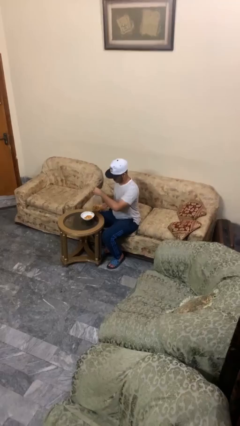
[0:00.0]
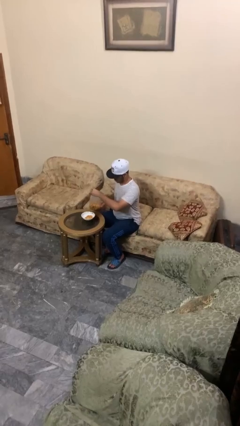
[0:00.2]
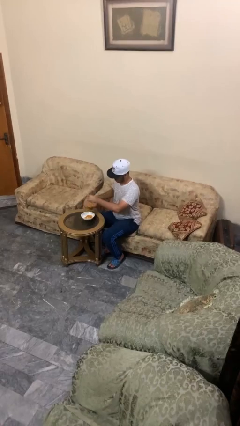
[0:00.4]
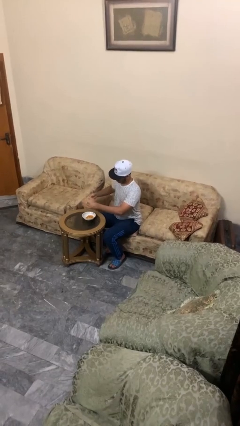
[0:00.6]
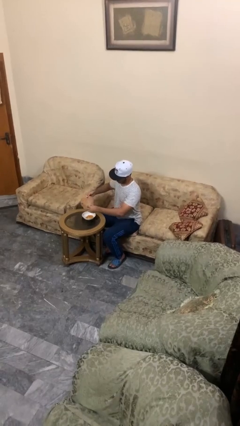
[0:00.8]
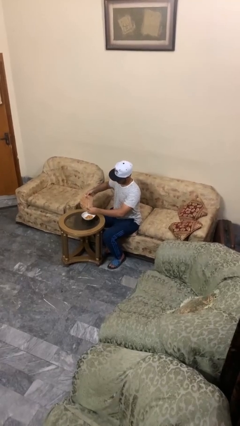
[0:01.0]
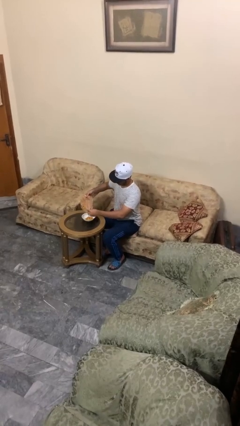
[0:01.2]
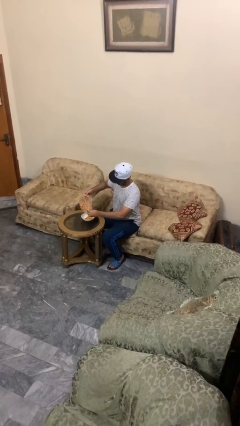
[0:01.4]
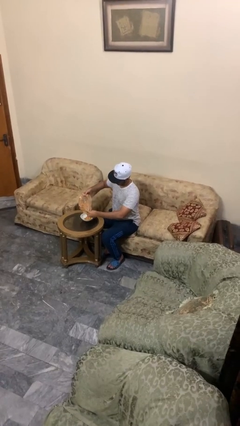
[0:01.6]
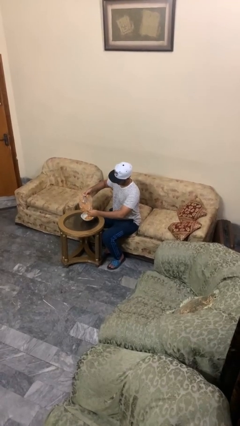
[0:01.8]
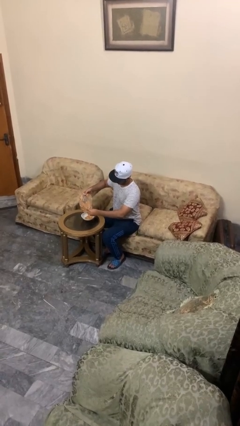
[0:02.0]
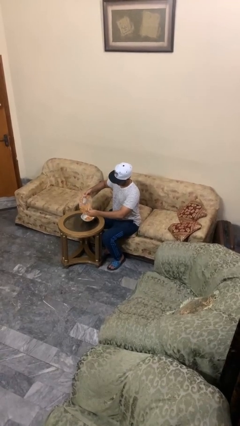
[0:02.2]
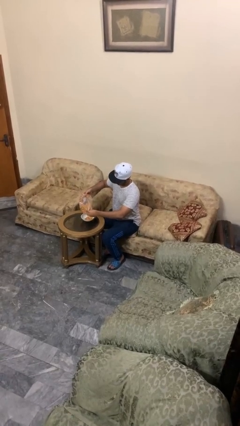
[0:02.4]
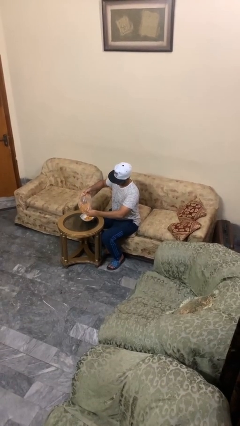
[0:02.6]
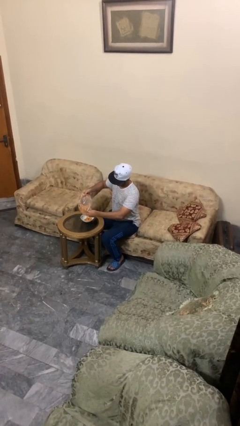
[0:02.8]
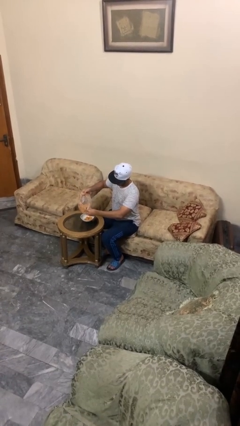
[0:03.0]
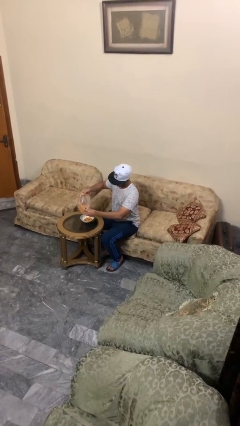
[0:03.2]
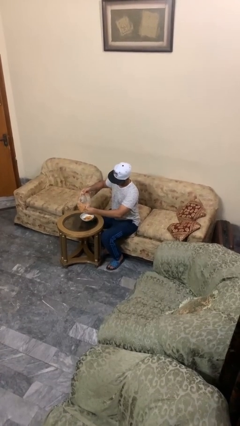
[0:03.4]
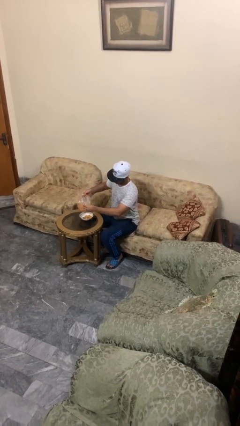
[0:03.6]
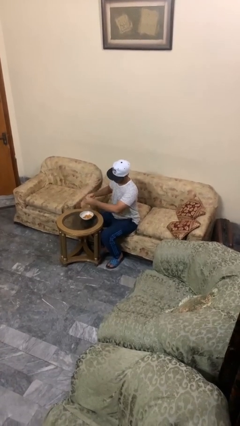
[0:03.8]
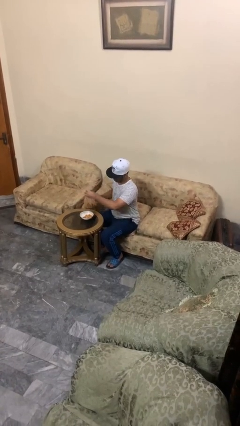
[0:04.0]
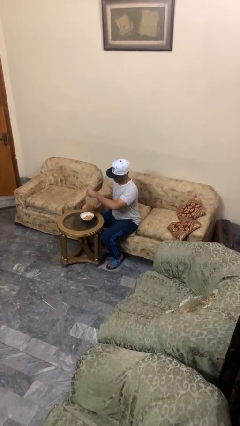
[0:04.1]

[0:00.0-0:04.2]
person pours into bowl

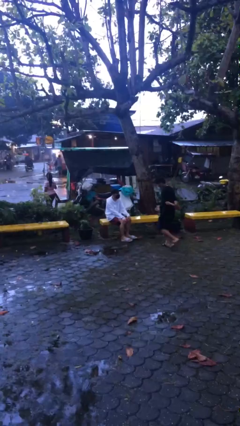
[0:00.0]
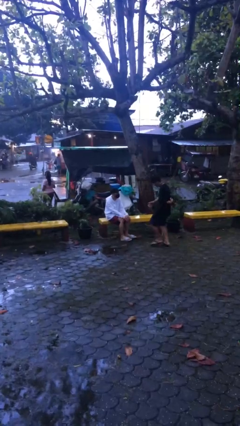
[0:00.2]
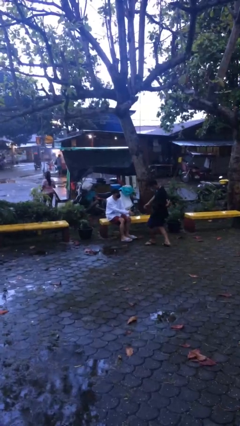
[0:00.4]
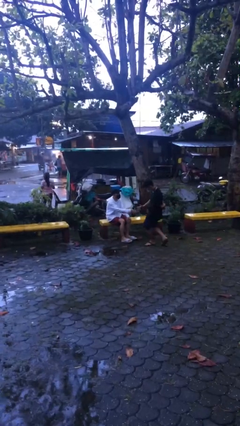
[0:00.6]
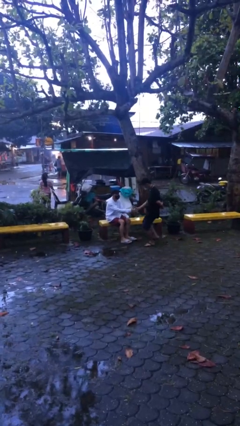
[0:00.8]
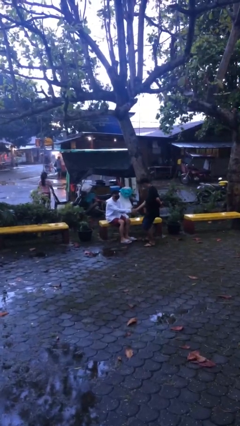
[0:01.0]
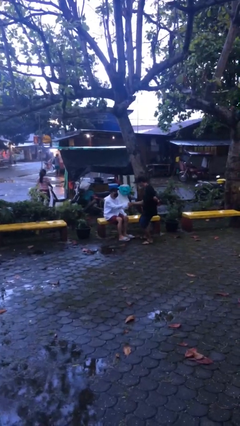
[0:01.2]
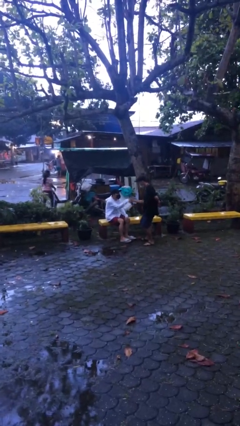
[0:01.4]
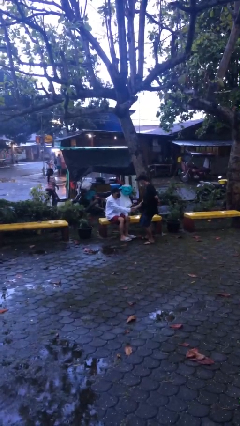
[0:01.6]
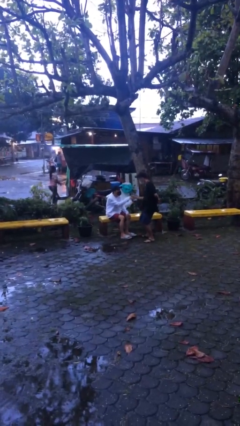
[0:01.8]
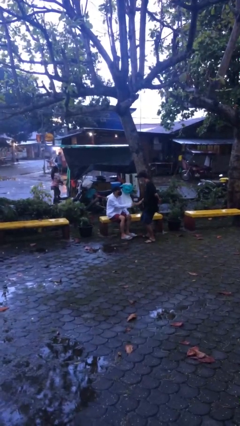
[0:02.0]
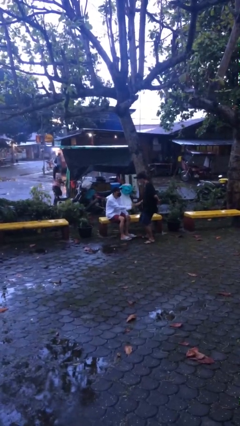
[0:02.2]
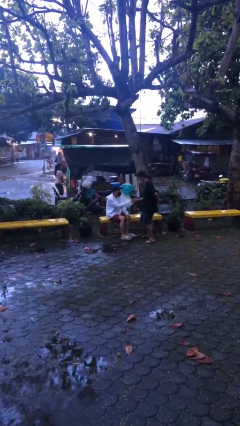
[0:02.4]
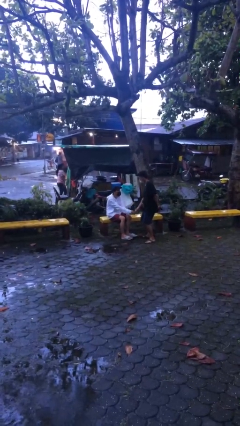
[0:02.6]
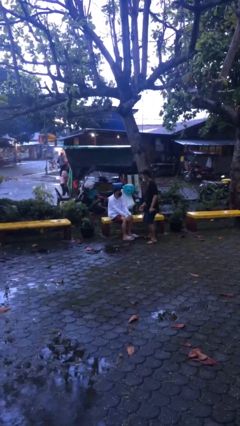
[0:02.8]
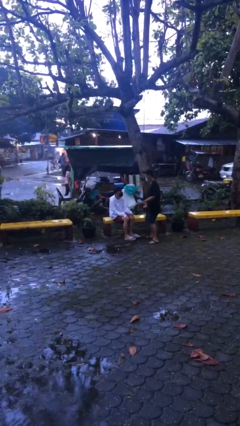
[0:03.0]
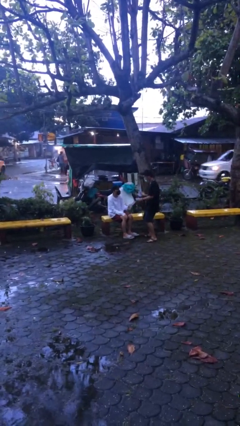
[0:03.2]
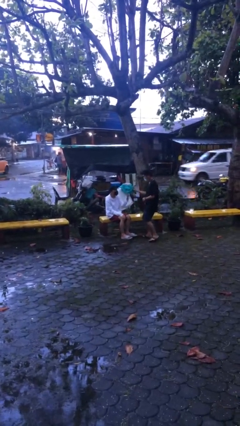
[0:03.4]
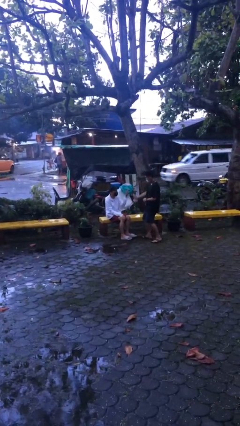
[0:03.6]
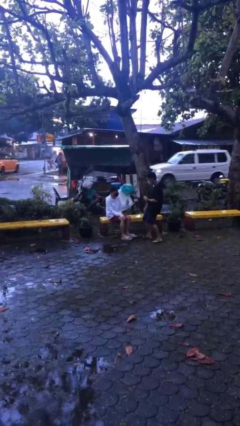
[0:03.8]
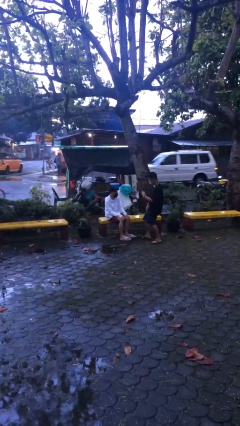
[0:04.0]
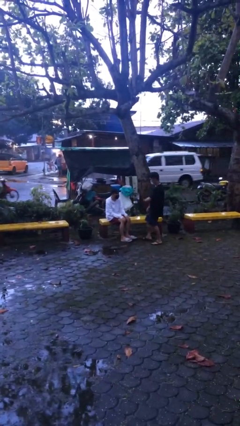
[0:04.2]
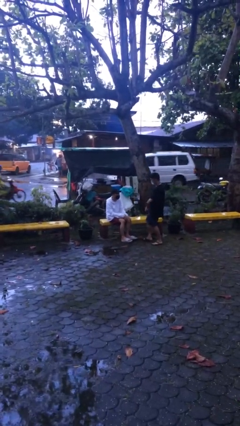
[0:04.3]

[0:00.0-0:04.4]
person shakes hand

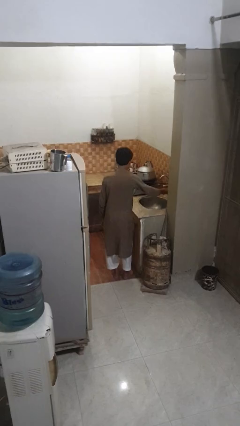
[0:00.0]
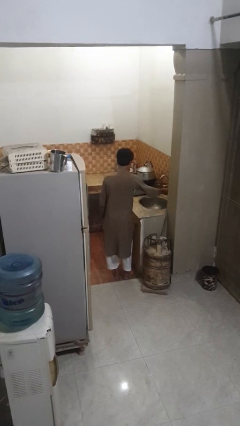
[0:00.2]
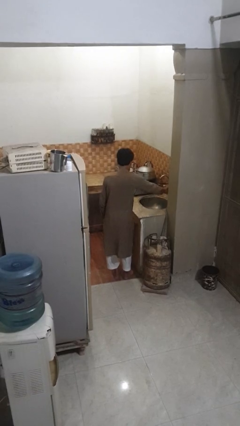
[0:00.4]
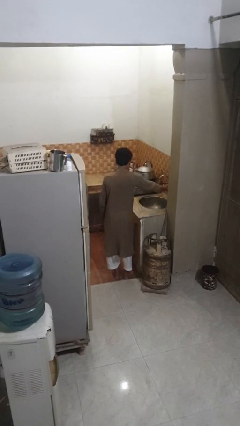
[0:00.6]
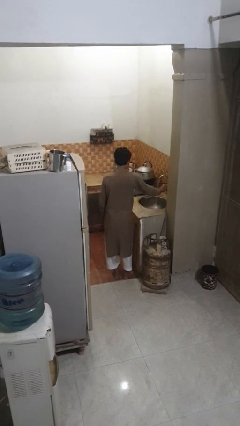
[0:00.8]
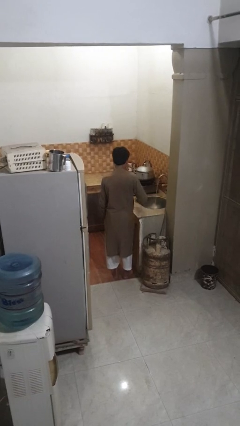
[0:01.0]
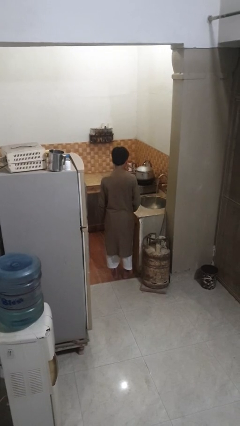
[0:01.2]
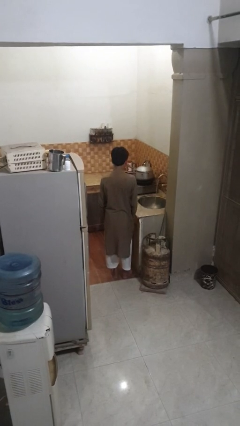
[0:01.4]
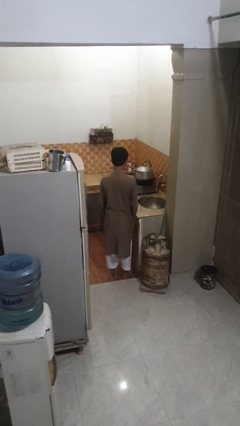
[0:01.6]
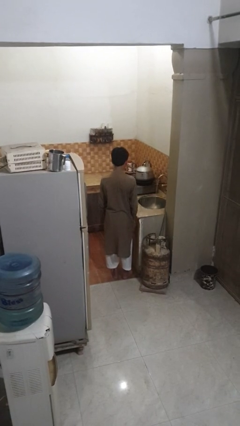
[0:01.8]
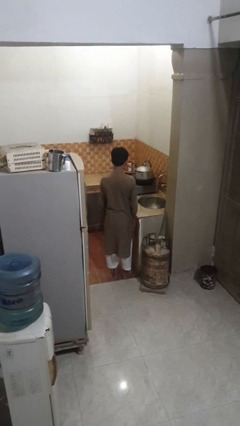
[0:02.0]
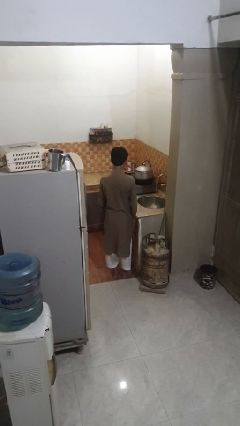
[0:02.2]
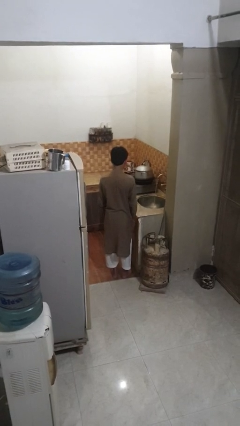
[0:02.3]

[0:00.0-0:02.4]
person turns on faucet

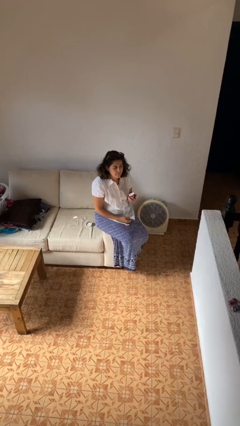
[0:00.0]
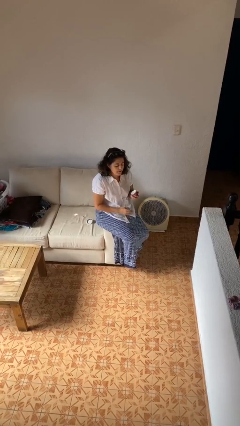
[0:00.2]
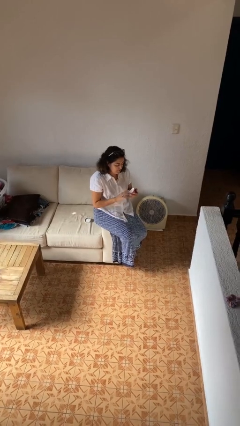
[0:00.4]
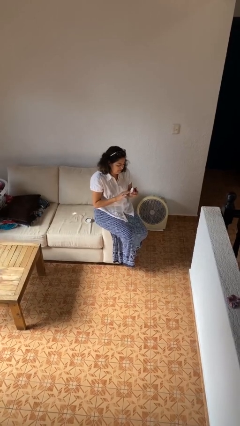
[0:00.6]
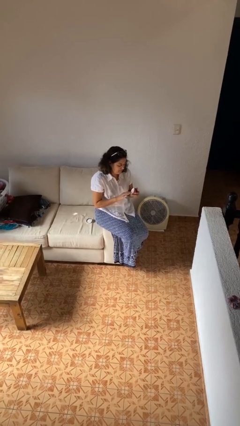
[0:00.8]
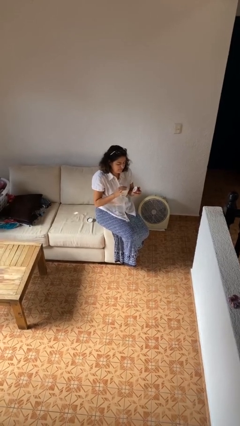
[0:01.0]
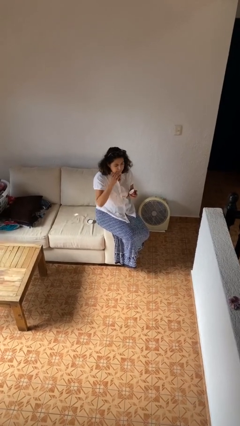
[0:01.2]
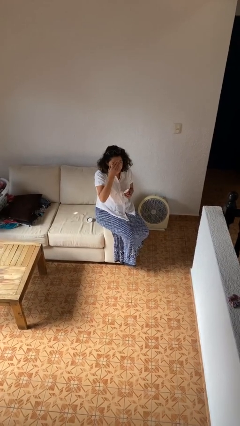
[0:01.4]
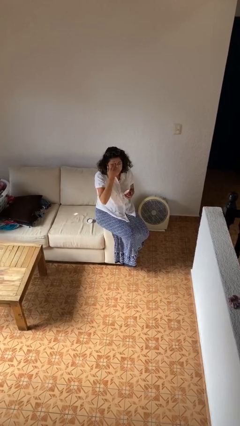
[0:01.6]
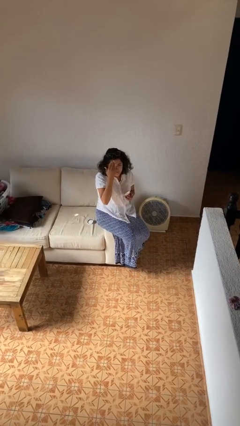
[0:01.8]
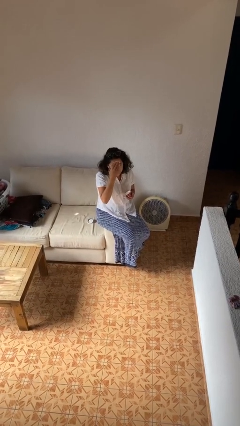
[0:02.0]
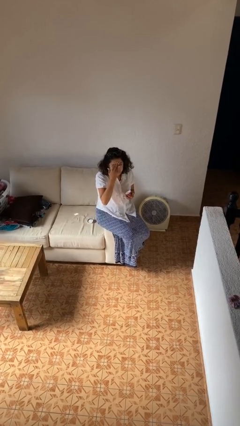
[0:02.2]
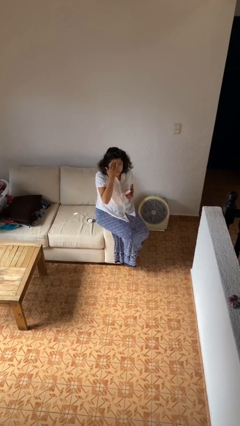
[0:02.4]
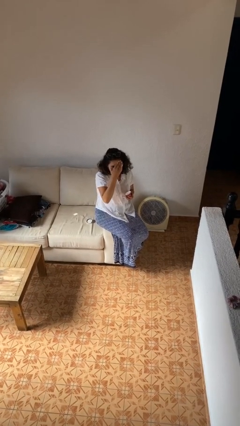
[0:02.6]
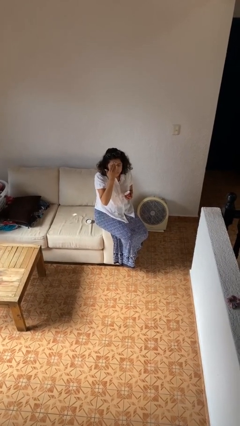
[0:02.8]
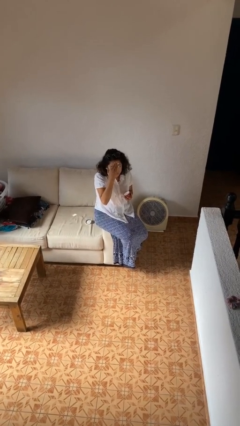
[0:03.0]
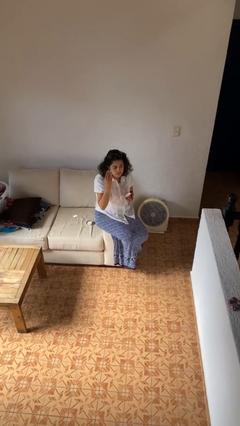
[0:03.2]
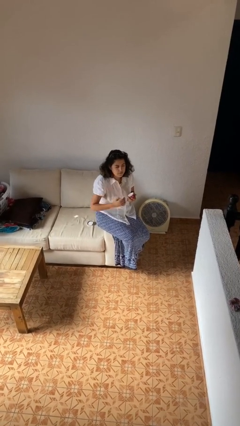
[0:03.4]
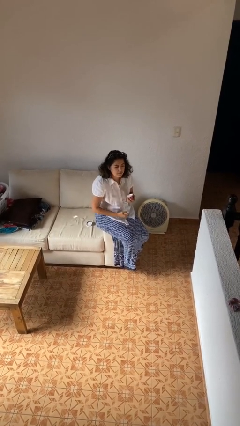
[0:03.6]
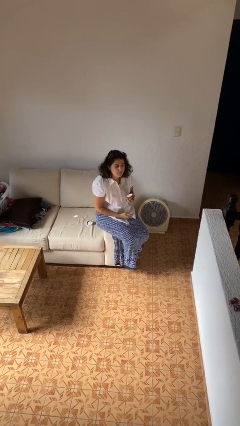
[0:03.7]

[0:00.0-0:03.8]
person applies facial moisturizer

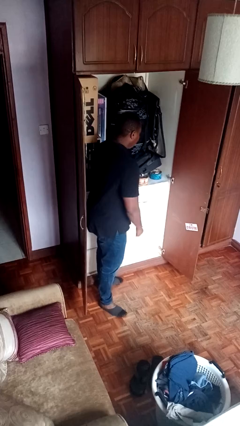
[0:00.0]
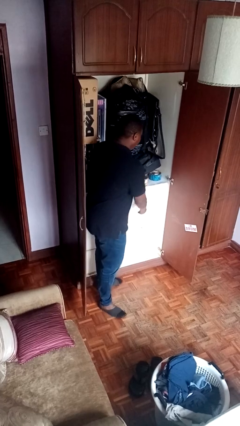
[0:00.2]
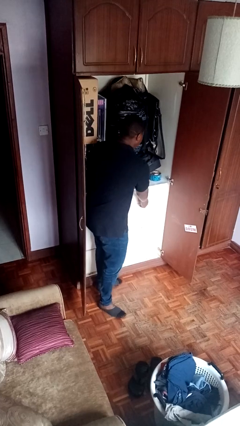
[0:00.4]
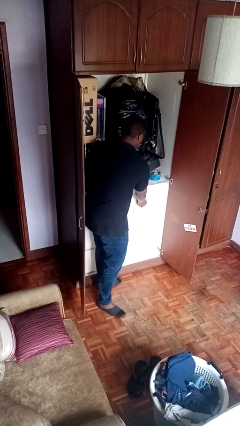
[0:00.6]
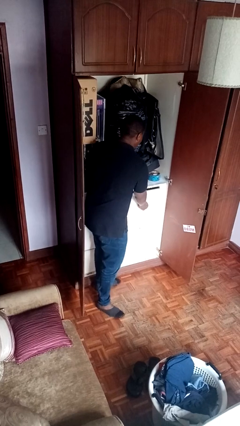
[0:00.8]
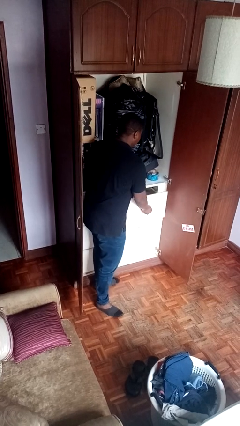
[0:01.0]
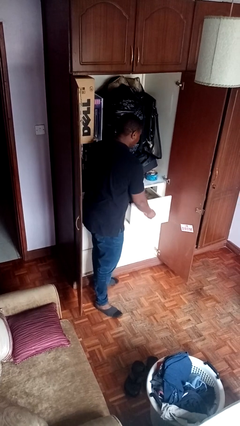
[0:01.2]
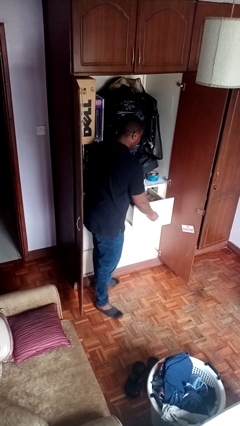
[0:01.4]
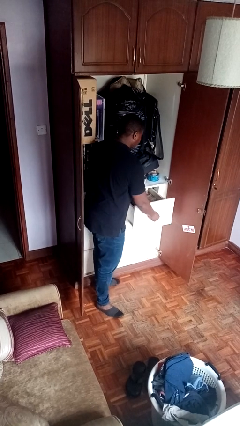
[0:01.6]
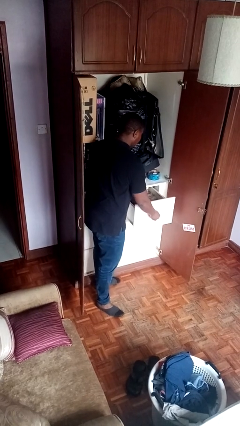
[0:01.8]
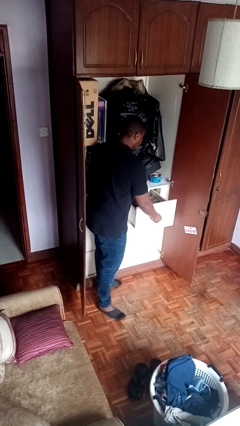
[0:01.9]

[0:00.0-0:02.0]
person opens dresser drawer

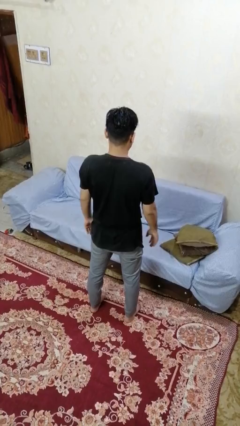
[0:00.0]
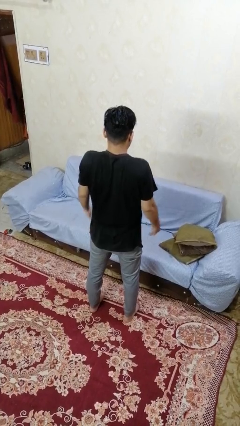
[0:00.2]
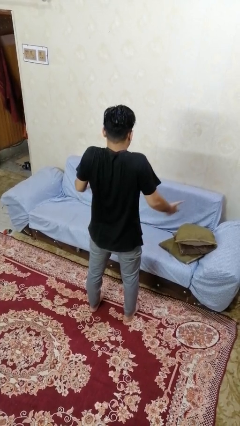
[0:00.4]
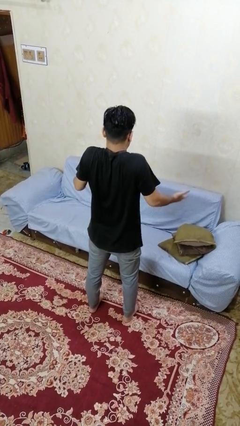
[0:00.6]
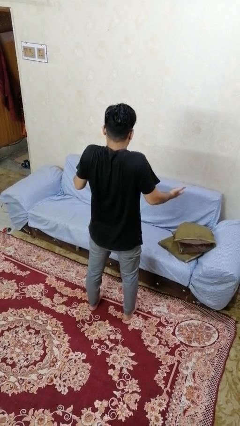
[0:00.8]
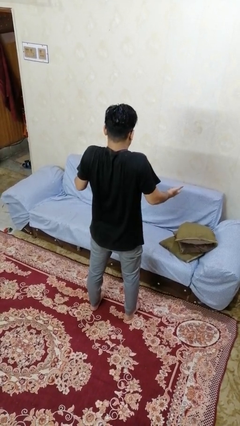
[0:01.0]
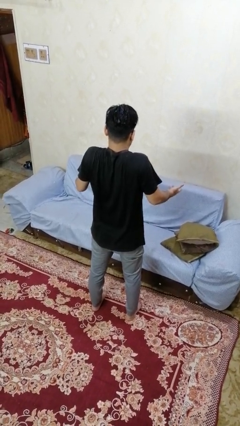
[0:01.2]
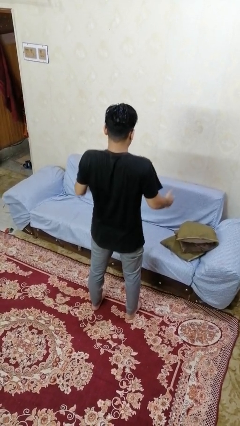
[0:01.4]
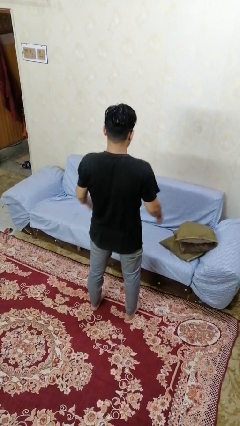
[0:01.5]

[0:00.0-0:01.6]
person shrugs
